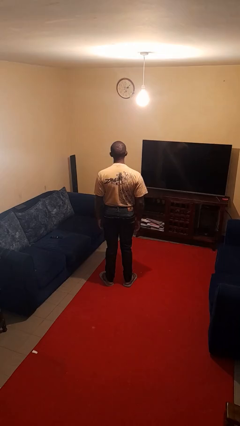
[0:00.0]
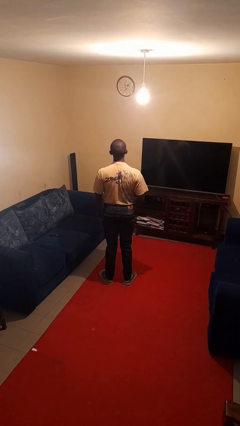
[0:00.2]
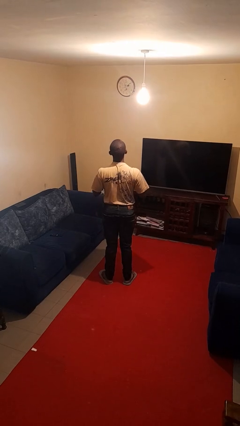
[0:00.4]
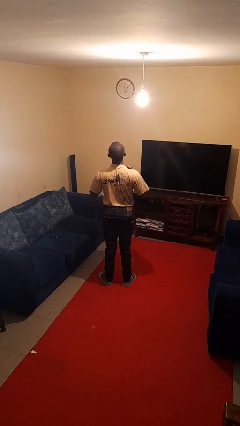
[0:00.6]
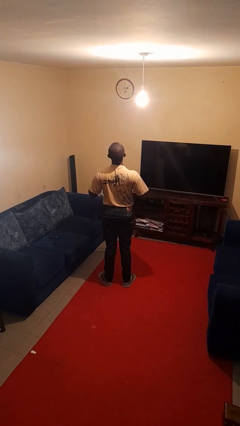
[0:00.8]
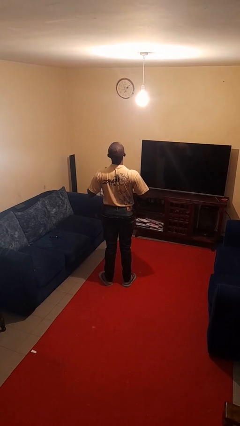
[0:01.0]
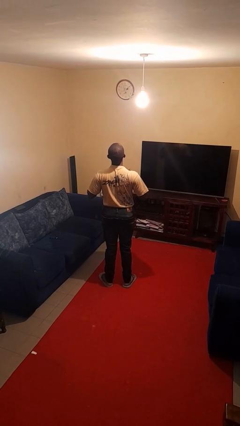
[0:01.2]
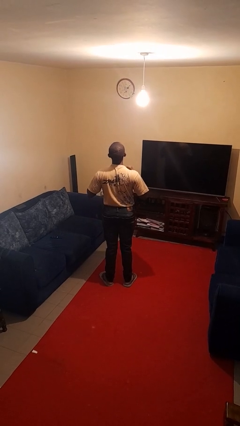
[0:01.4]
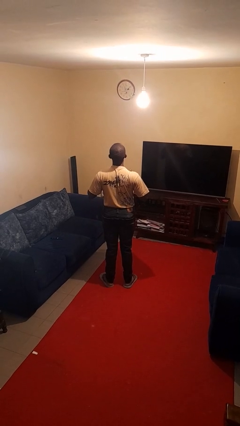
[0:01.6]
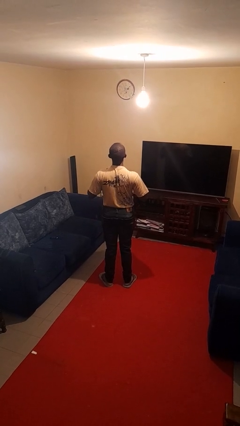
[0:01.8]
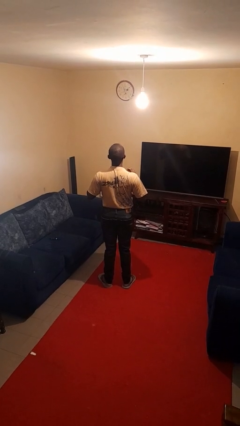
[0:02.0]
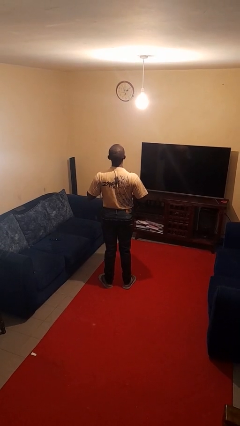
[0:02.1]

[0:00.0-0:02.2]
person drums on chest

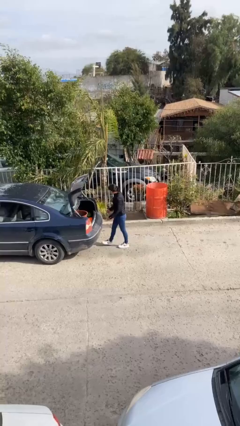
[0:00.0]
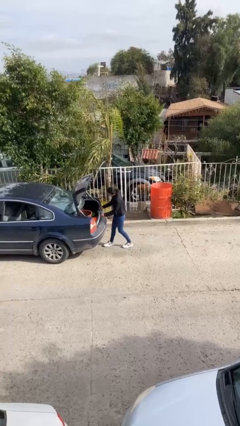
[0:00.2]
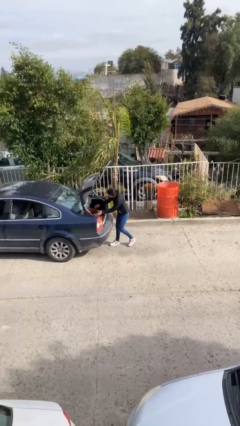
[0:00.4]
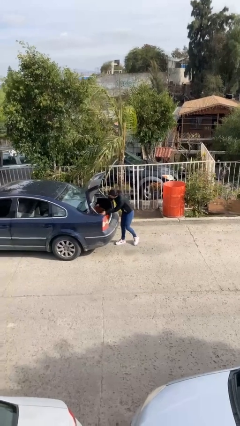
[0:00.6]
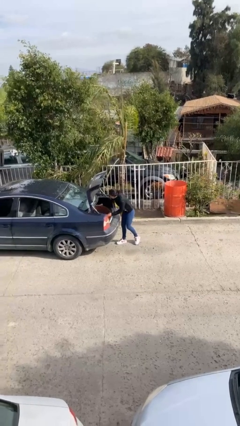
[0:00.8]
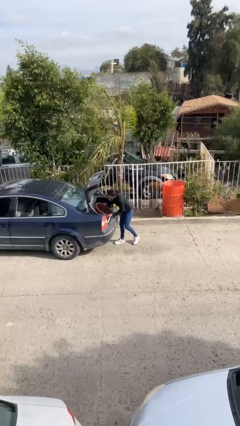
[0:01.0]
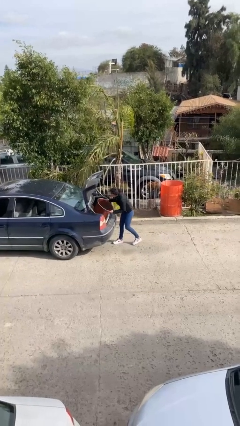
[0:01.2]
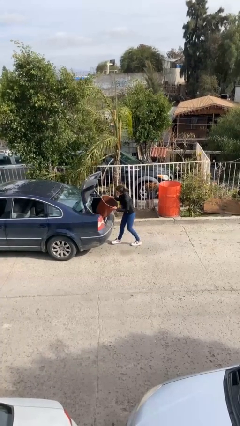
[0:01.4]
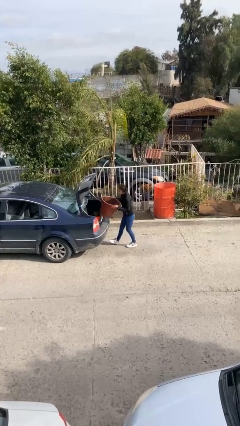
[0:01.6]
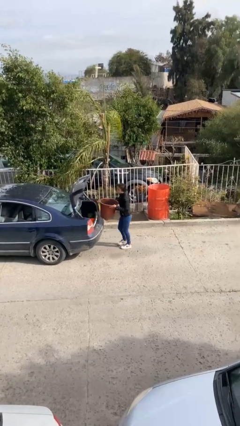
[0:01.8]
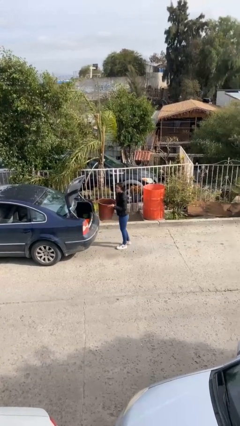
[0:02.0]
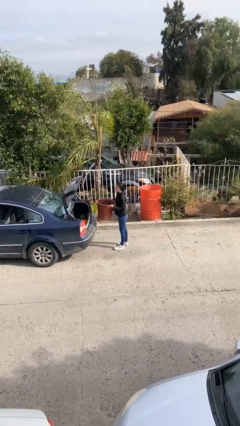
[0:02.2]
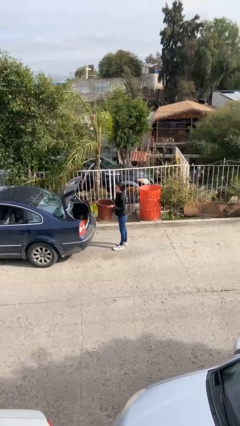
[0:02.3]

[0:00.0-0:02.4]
person unloads car

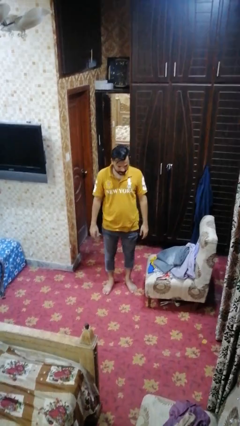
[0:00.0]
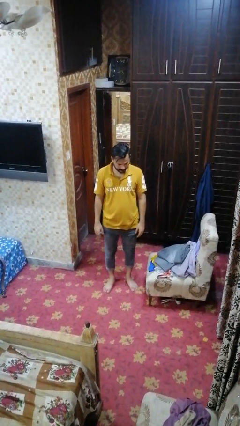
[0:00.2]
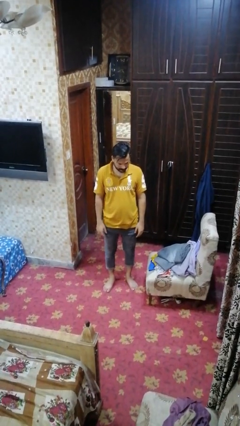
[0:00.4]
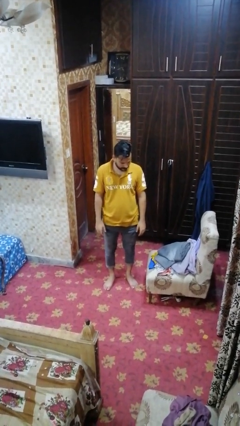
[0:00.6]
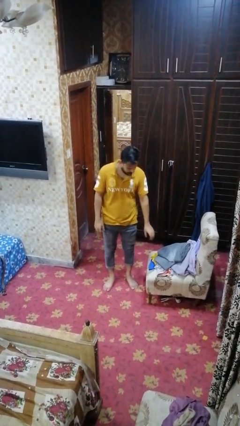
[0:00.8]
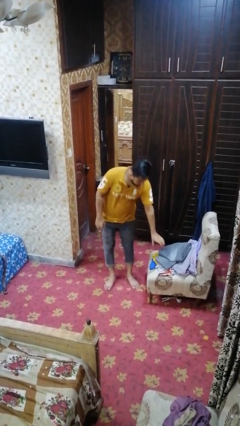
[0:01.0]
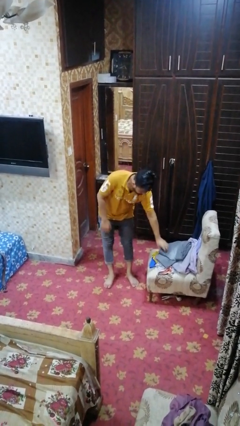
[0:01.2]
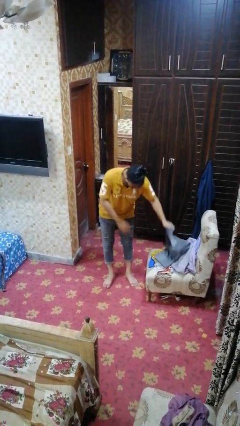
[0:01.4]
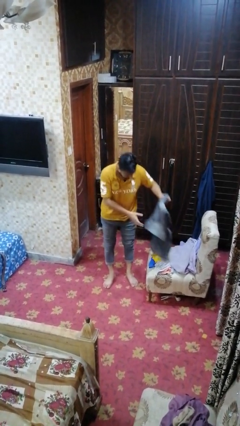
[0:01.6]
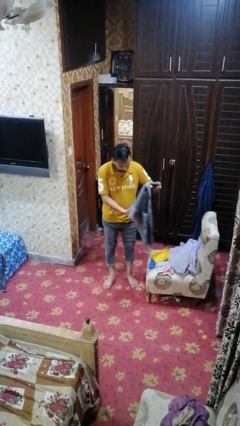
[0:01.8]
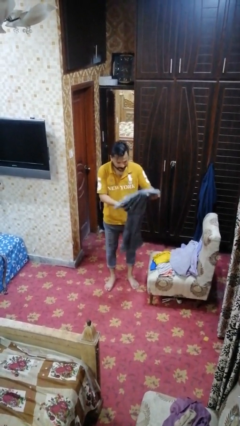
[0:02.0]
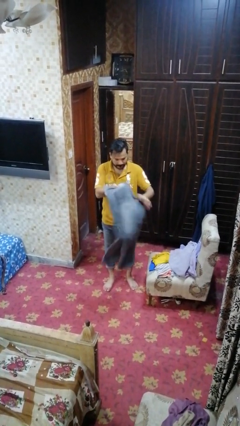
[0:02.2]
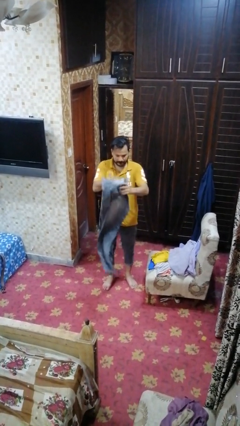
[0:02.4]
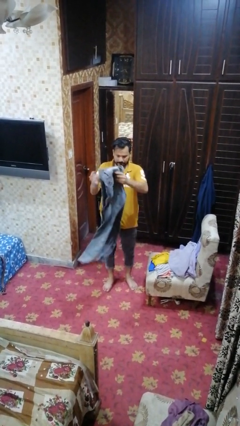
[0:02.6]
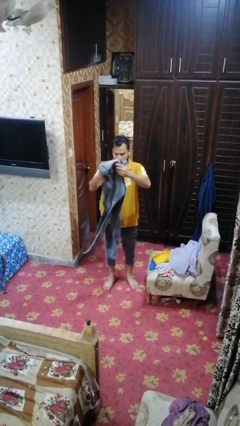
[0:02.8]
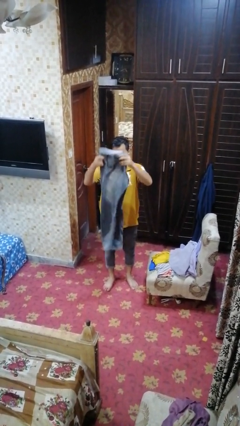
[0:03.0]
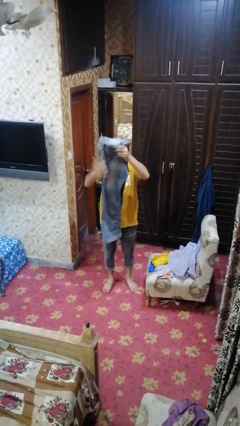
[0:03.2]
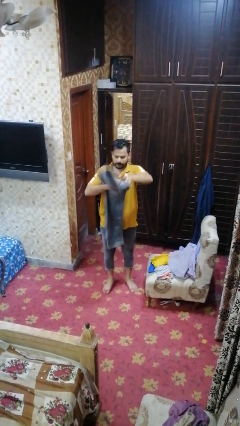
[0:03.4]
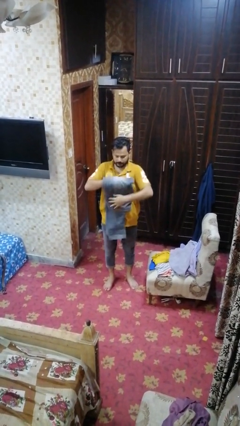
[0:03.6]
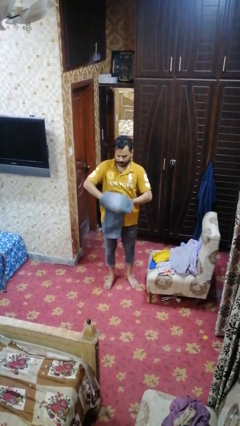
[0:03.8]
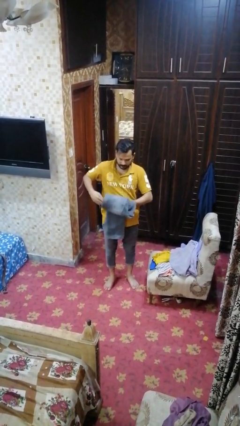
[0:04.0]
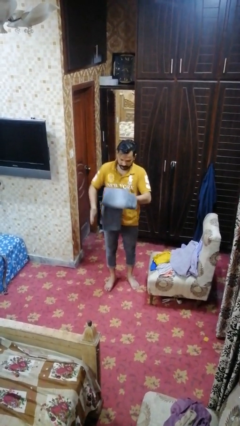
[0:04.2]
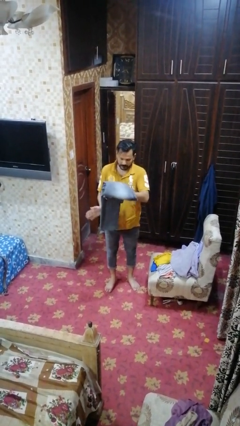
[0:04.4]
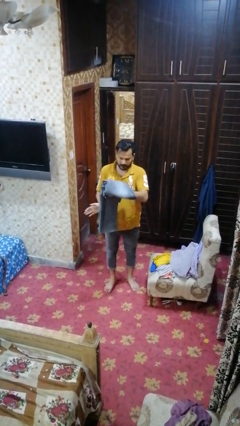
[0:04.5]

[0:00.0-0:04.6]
person folds pants

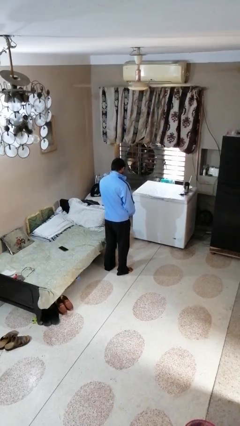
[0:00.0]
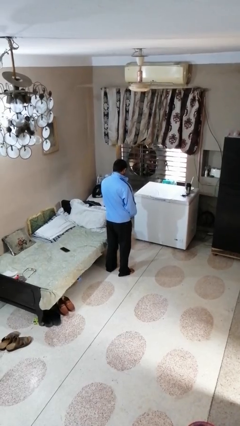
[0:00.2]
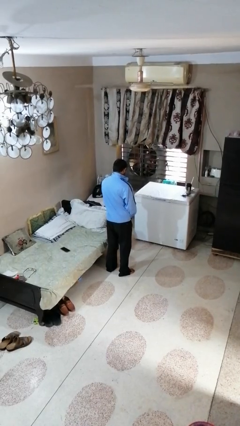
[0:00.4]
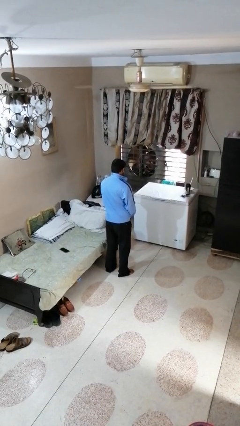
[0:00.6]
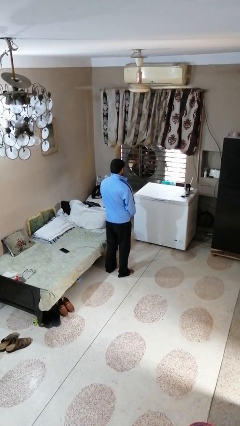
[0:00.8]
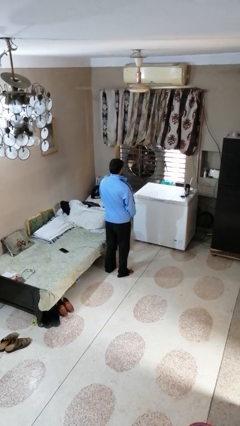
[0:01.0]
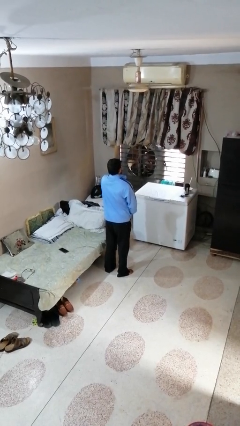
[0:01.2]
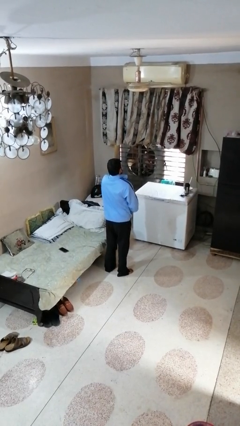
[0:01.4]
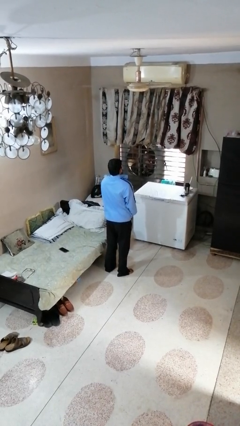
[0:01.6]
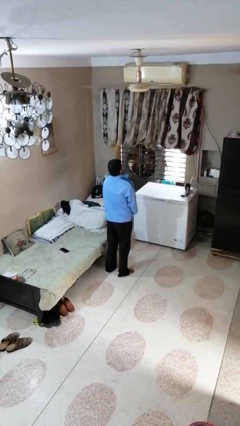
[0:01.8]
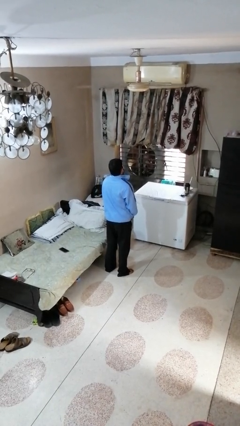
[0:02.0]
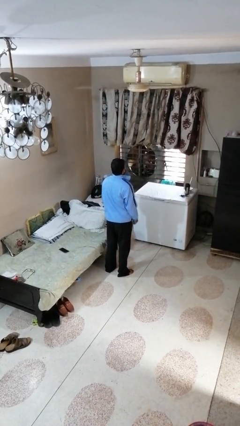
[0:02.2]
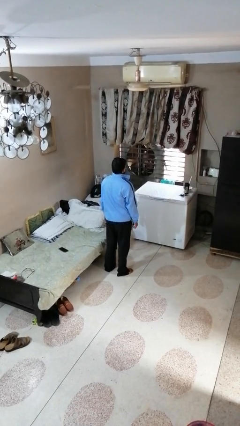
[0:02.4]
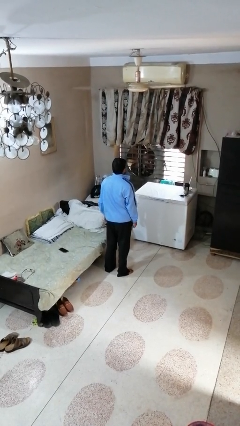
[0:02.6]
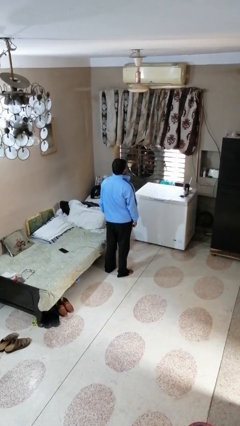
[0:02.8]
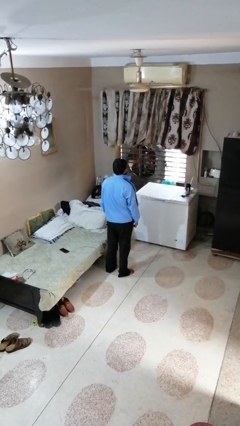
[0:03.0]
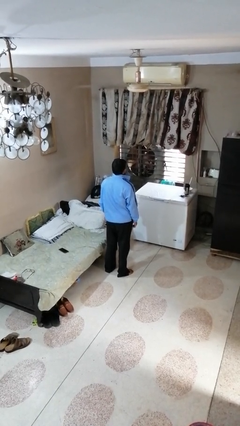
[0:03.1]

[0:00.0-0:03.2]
person unzips jacket

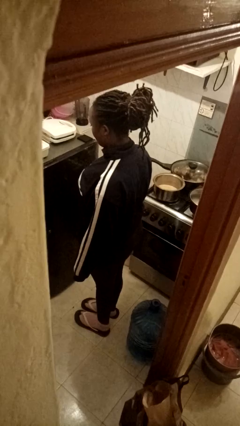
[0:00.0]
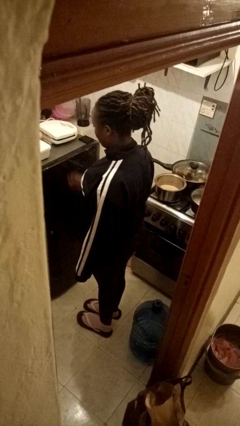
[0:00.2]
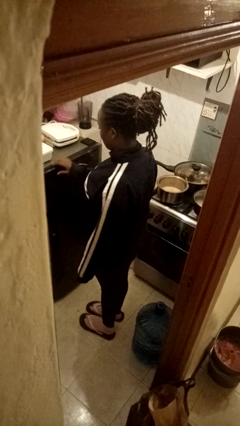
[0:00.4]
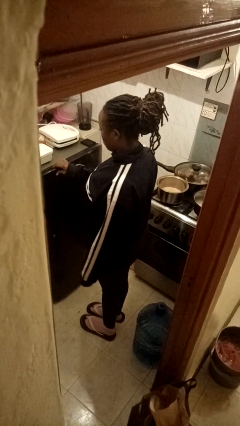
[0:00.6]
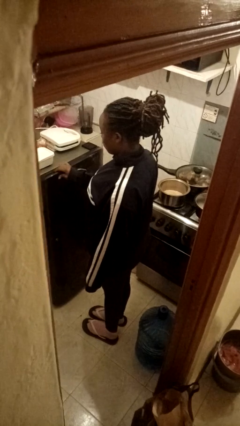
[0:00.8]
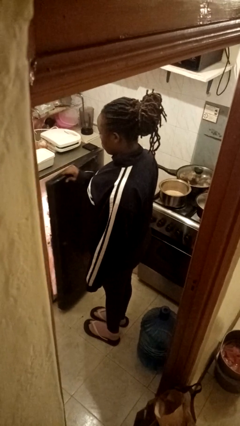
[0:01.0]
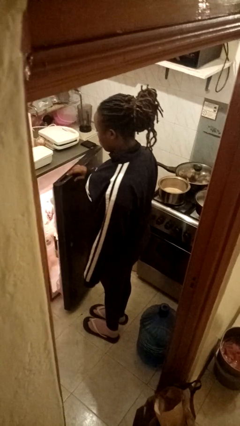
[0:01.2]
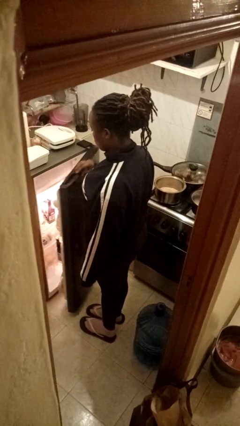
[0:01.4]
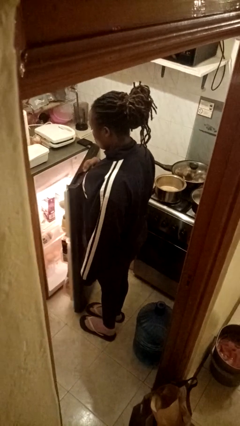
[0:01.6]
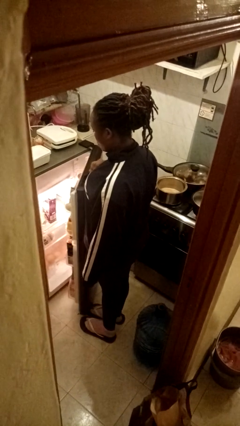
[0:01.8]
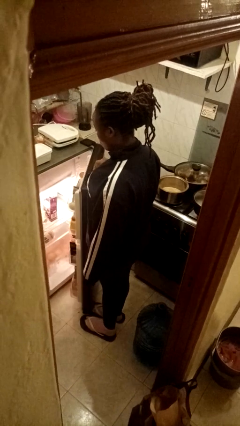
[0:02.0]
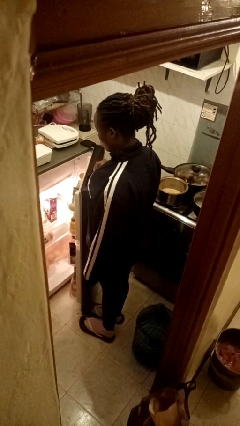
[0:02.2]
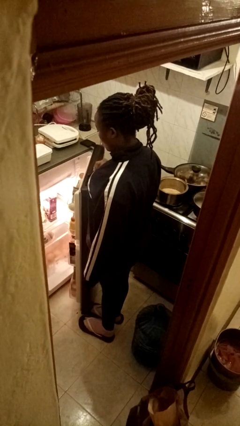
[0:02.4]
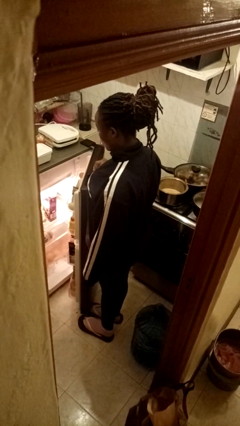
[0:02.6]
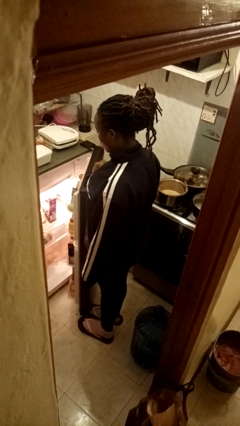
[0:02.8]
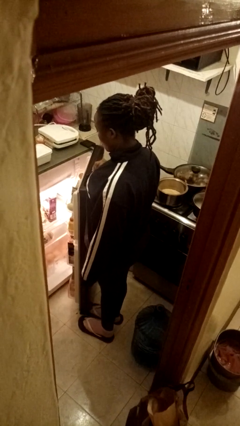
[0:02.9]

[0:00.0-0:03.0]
person opens refrigerator

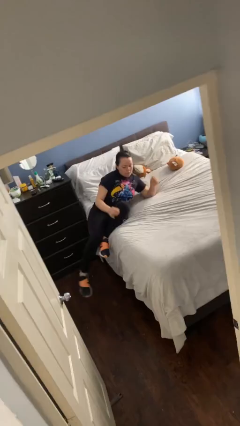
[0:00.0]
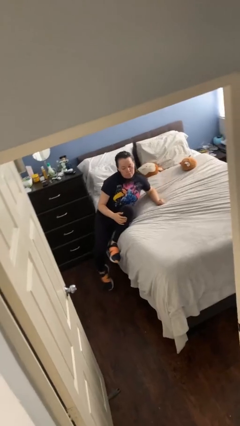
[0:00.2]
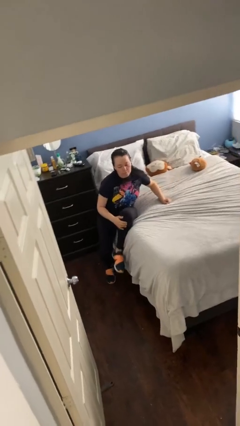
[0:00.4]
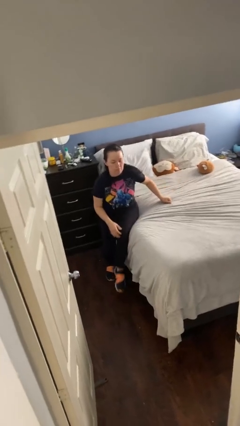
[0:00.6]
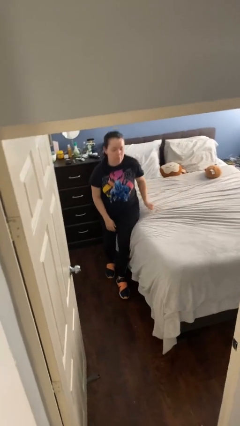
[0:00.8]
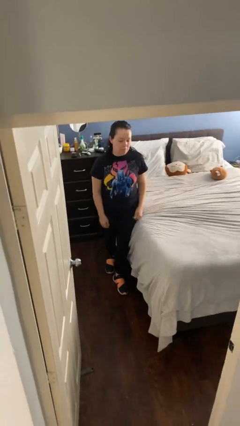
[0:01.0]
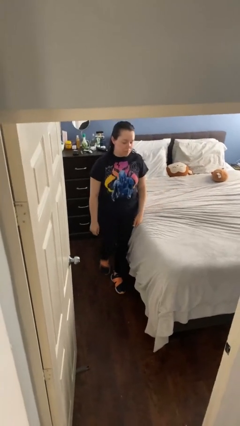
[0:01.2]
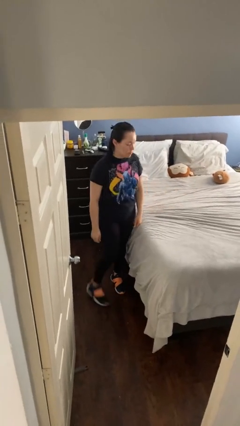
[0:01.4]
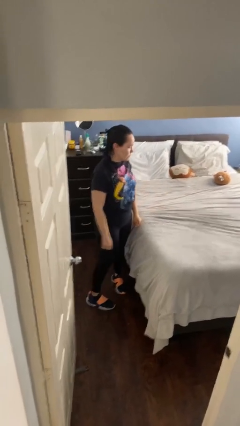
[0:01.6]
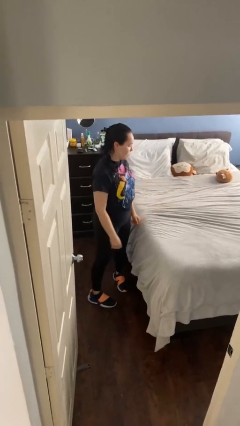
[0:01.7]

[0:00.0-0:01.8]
person stands up

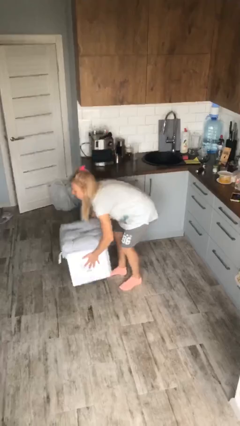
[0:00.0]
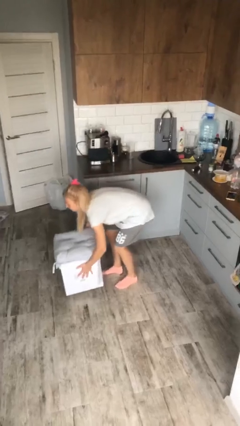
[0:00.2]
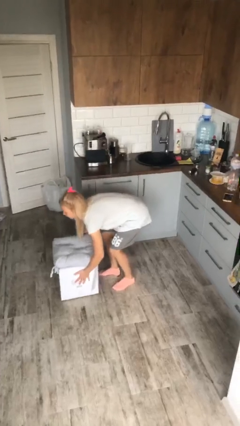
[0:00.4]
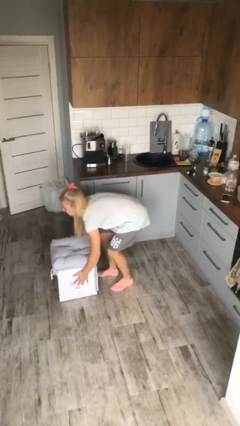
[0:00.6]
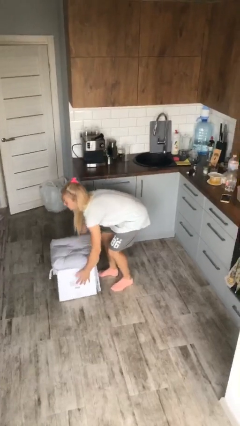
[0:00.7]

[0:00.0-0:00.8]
person puts down object on floor
